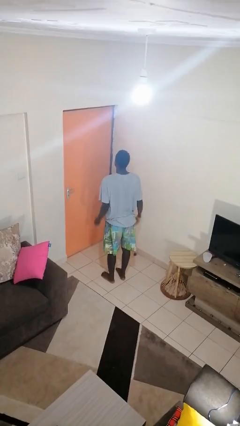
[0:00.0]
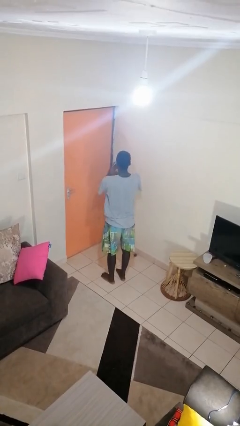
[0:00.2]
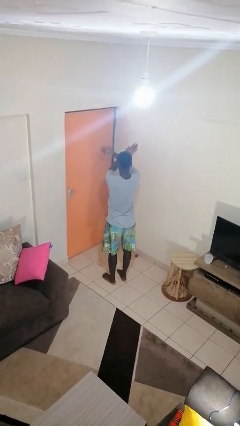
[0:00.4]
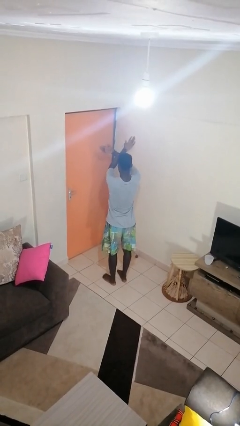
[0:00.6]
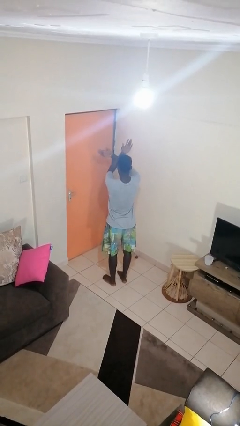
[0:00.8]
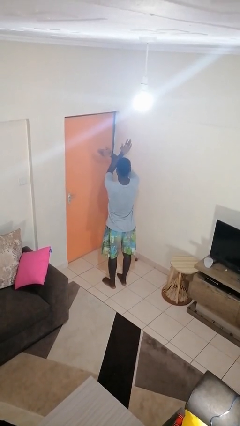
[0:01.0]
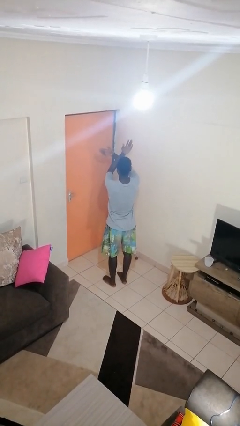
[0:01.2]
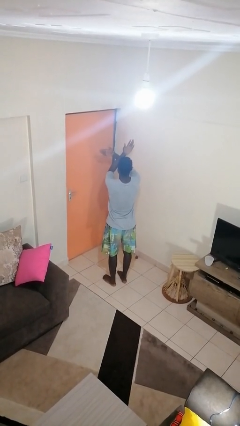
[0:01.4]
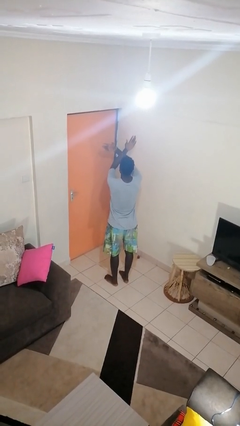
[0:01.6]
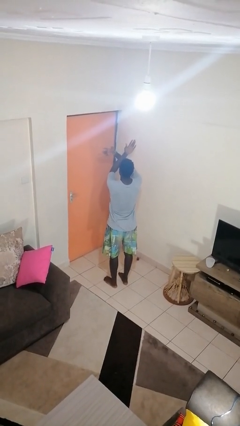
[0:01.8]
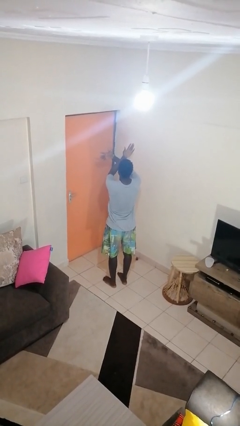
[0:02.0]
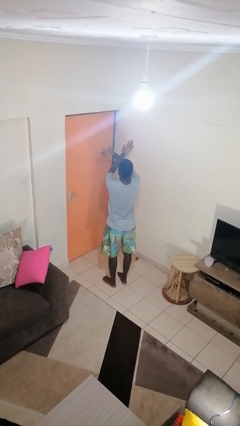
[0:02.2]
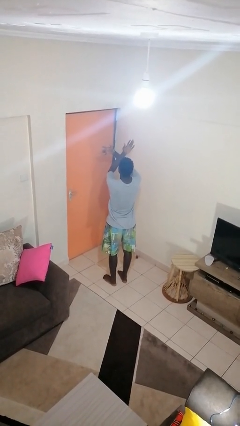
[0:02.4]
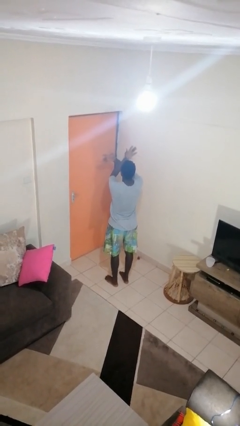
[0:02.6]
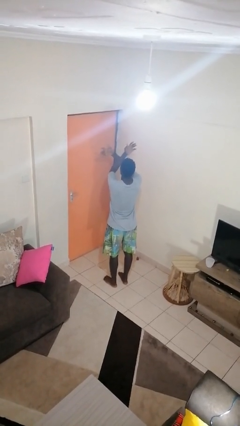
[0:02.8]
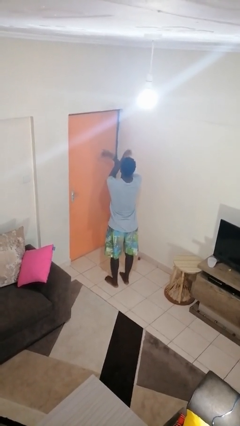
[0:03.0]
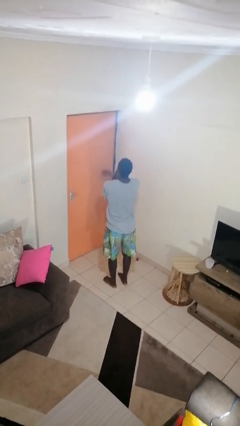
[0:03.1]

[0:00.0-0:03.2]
person gestures arms x

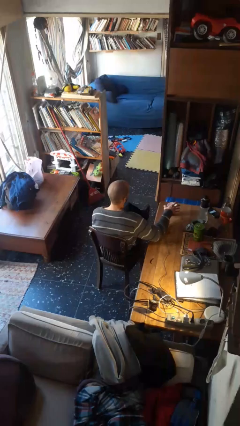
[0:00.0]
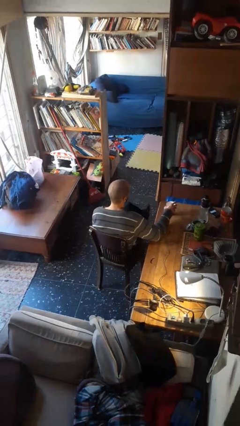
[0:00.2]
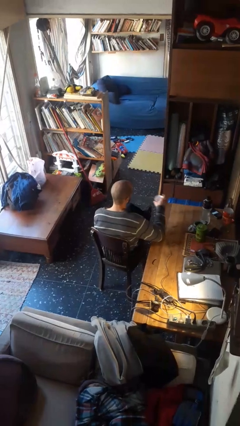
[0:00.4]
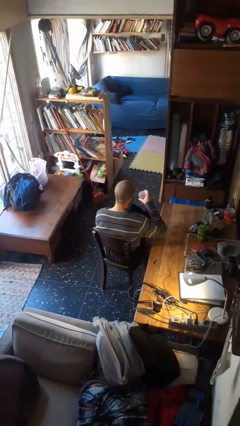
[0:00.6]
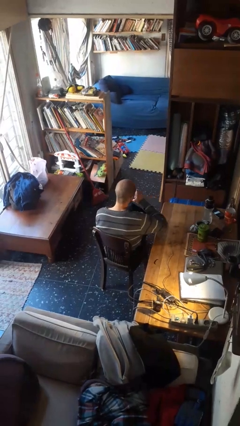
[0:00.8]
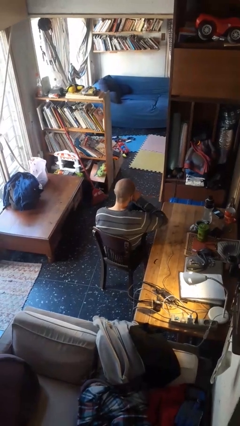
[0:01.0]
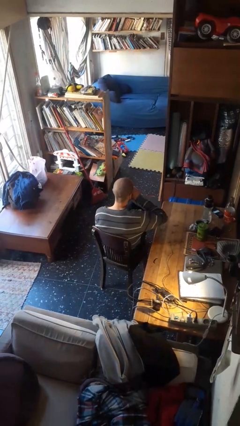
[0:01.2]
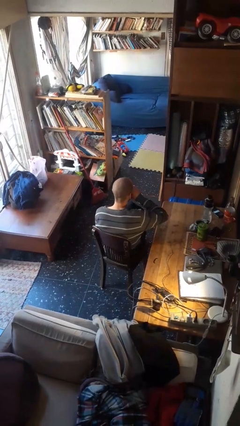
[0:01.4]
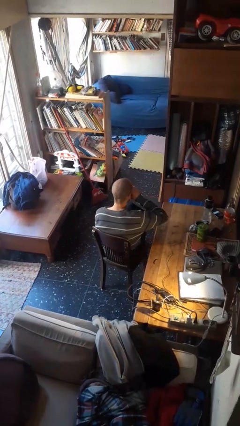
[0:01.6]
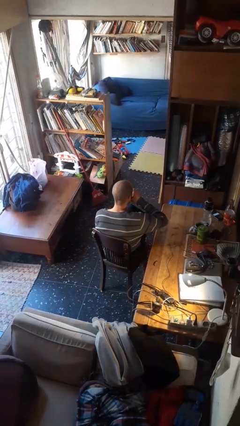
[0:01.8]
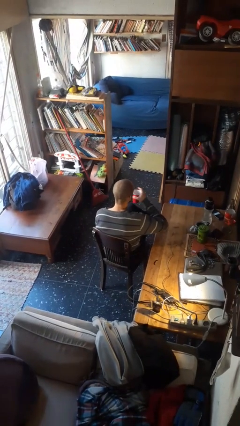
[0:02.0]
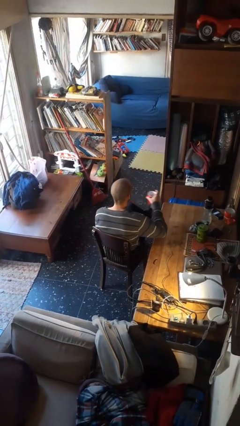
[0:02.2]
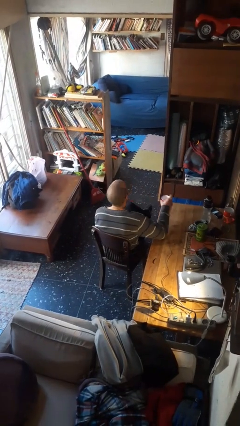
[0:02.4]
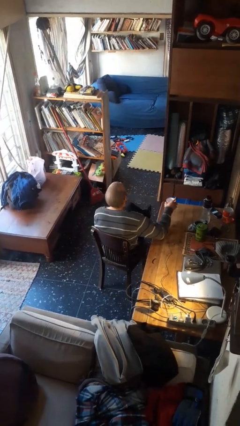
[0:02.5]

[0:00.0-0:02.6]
person drinks from cup

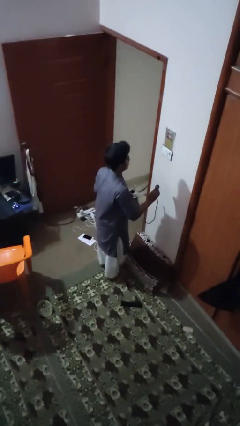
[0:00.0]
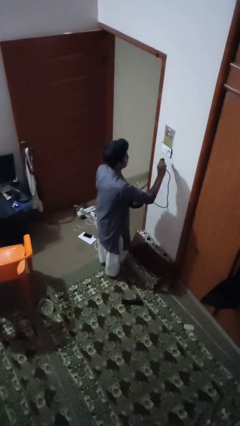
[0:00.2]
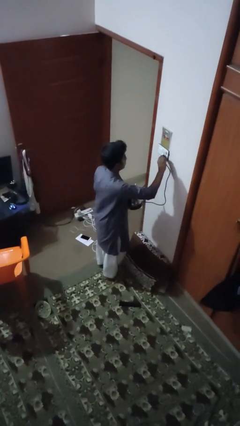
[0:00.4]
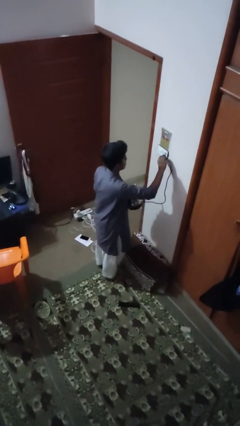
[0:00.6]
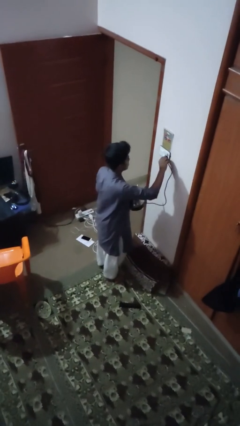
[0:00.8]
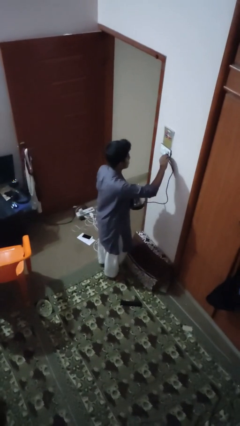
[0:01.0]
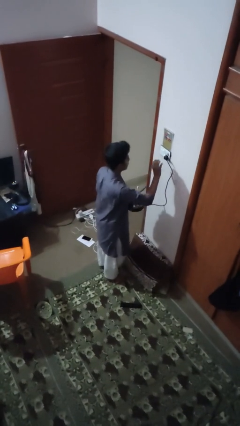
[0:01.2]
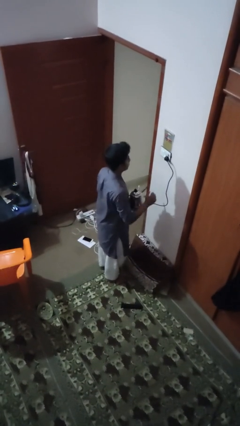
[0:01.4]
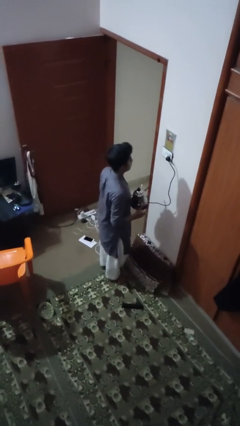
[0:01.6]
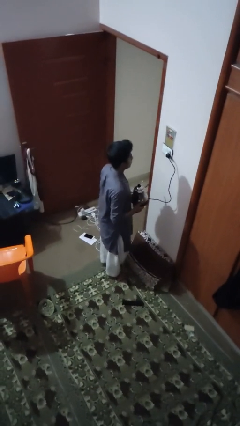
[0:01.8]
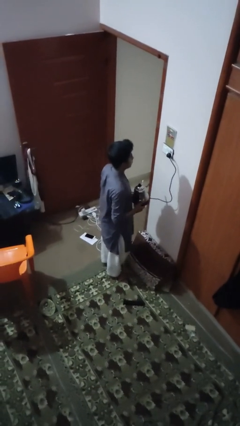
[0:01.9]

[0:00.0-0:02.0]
person plugs into electrical socket

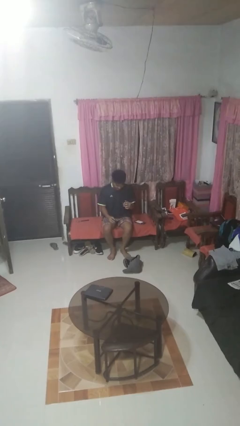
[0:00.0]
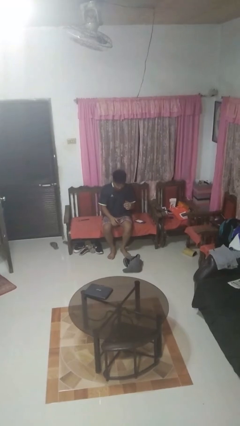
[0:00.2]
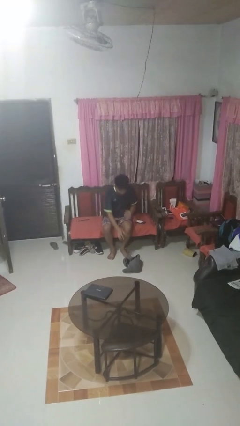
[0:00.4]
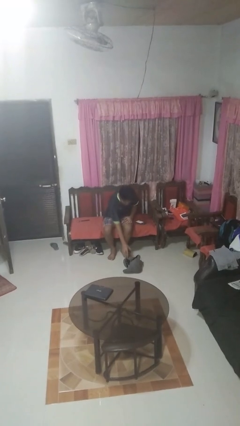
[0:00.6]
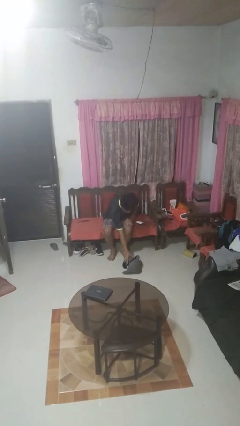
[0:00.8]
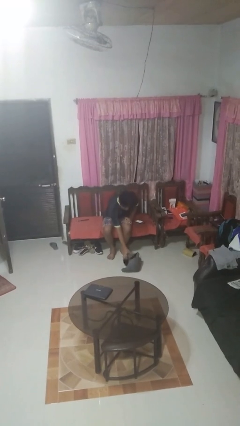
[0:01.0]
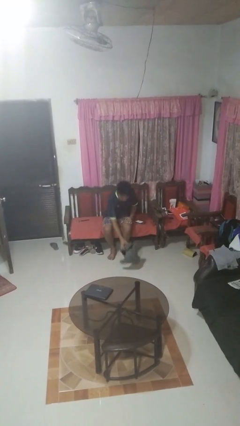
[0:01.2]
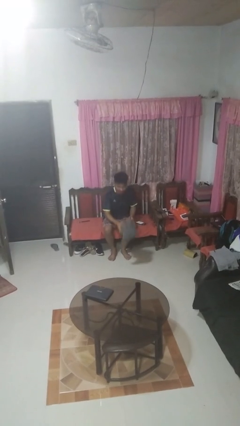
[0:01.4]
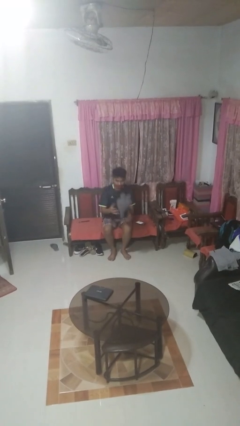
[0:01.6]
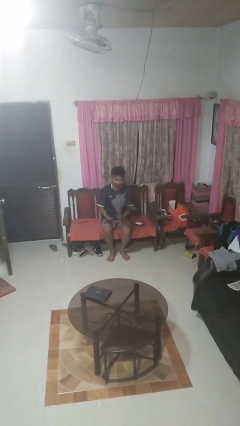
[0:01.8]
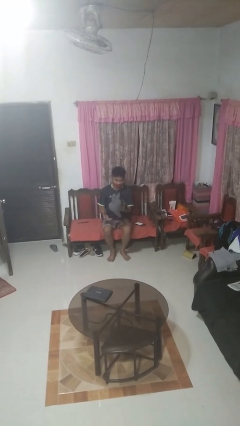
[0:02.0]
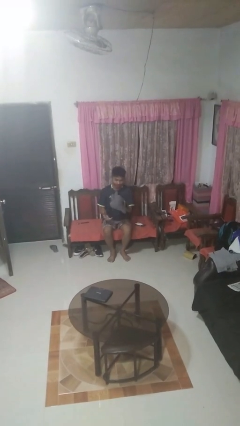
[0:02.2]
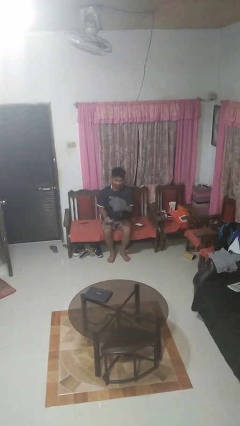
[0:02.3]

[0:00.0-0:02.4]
person picks up object from floor

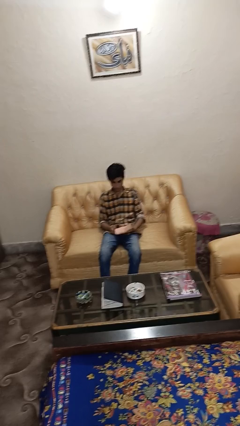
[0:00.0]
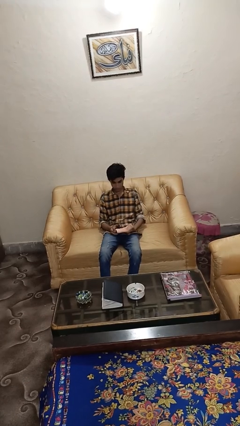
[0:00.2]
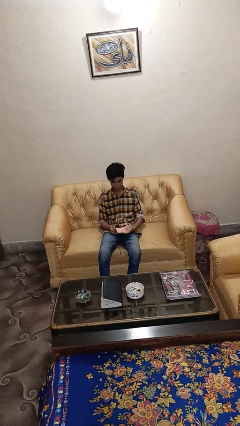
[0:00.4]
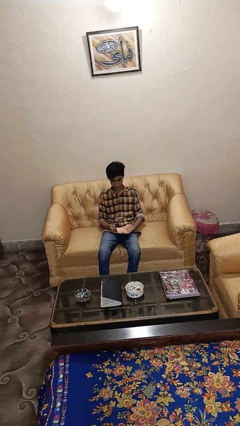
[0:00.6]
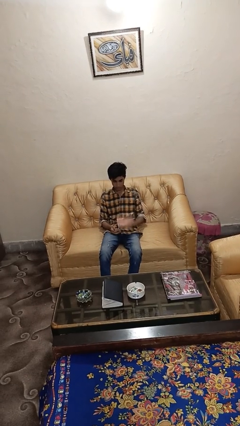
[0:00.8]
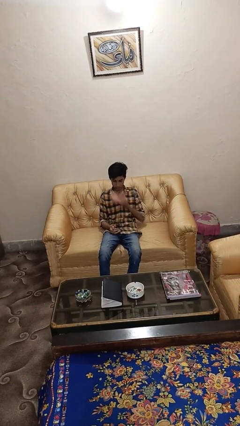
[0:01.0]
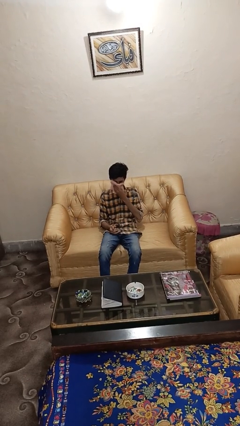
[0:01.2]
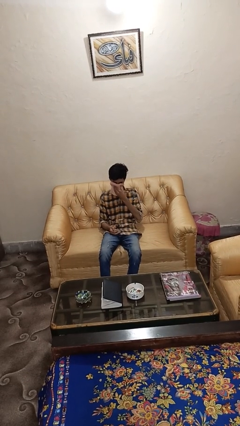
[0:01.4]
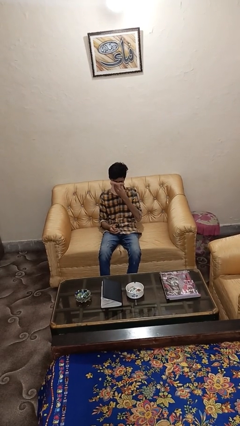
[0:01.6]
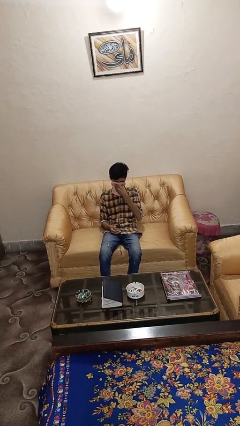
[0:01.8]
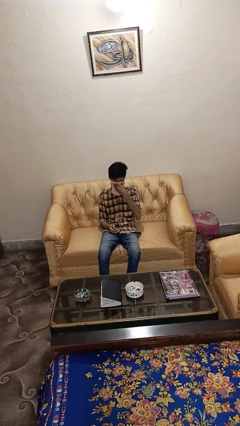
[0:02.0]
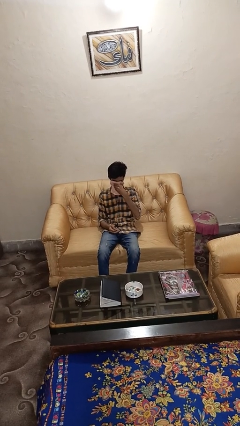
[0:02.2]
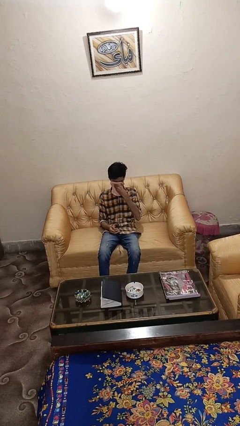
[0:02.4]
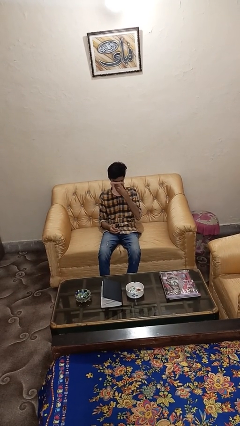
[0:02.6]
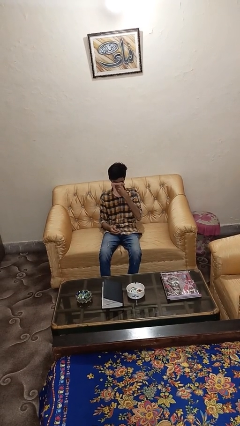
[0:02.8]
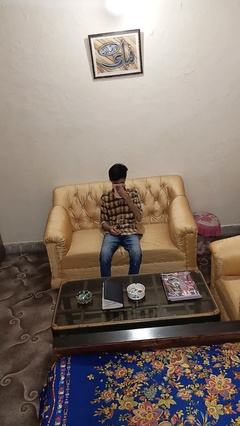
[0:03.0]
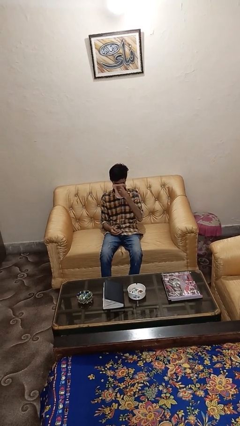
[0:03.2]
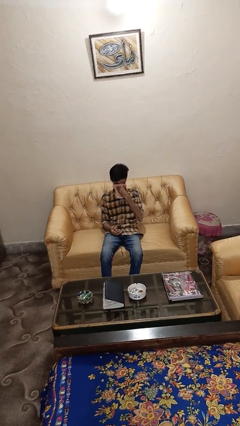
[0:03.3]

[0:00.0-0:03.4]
person blows nose

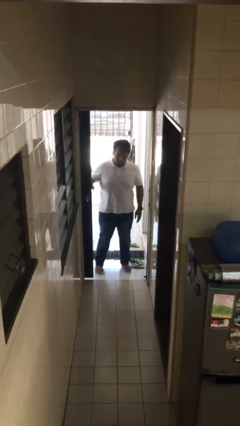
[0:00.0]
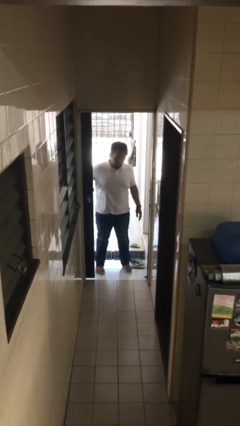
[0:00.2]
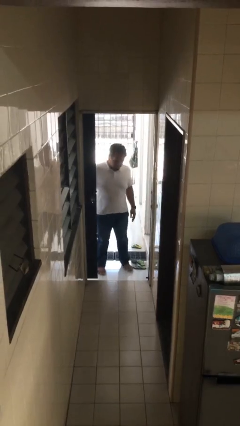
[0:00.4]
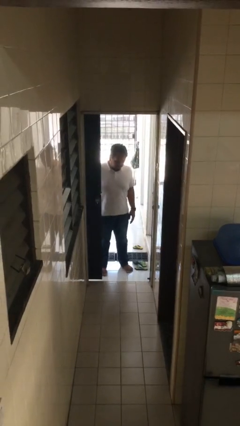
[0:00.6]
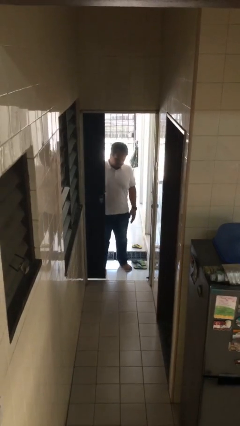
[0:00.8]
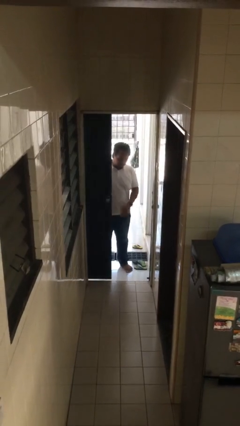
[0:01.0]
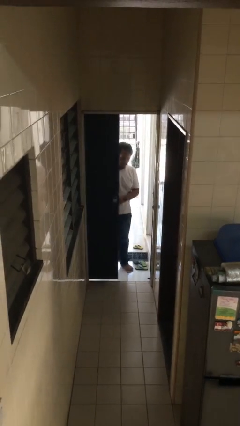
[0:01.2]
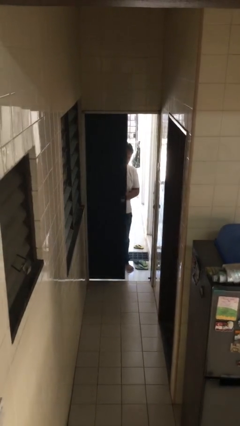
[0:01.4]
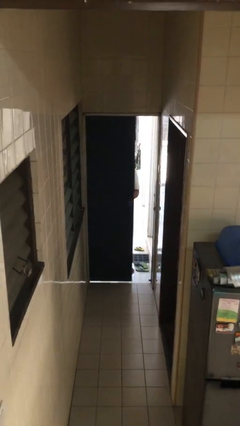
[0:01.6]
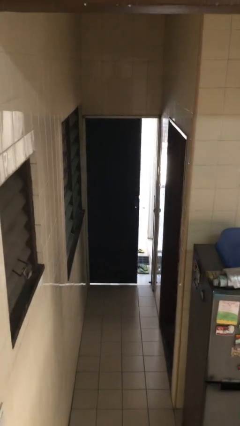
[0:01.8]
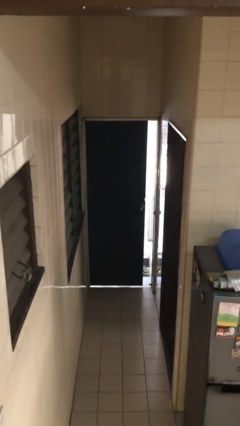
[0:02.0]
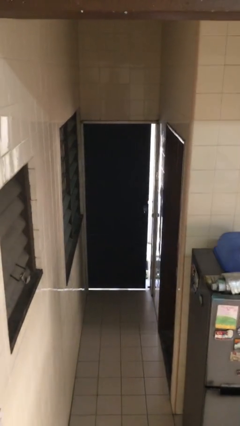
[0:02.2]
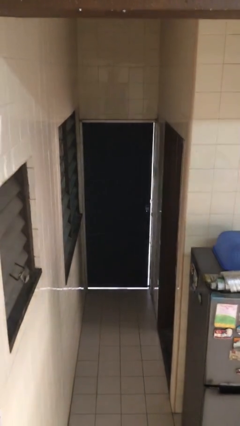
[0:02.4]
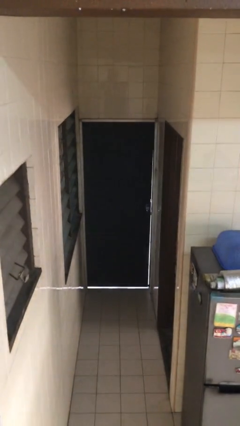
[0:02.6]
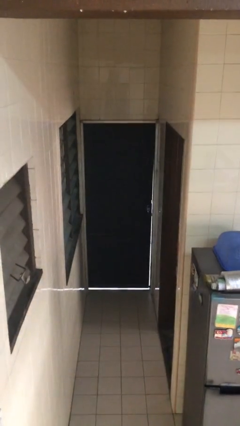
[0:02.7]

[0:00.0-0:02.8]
person closes facility door

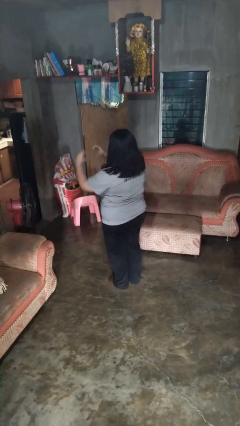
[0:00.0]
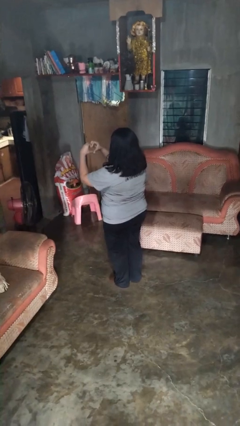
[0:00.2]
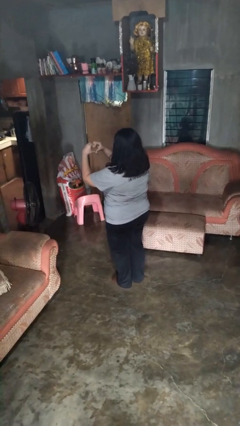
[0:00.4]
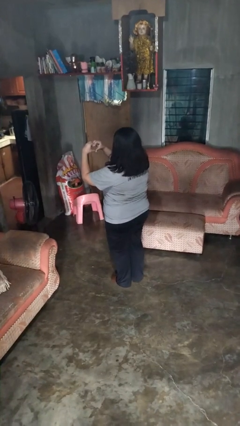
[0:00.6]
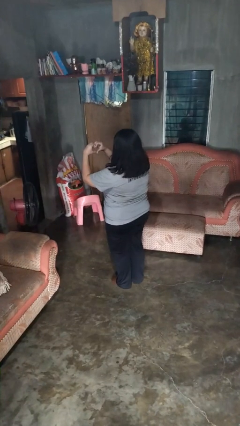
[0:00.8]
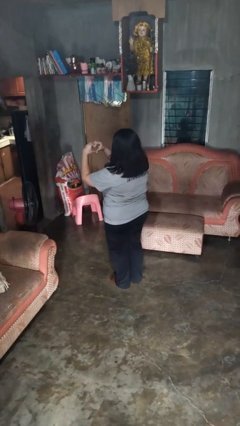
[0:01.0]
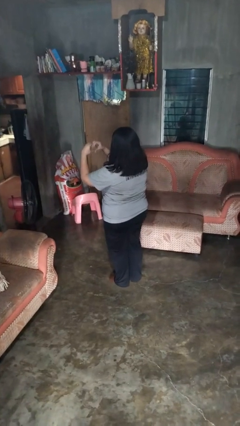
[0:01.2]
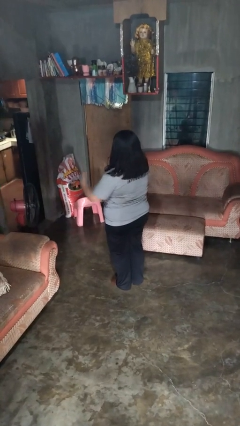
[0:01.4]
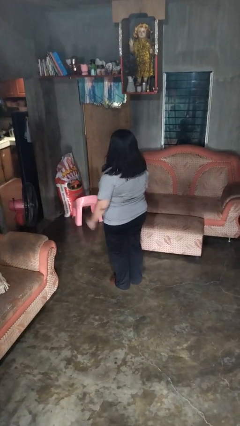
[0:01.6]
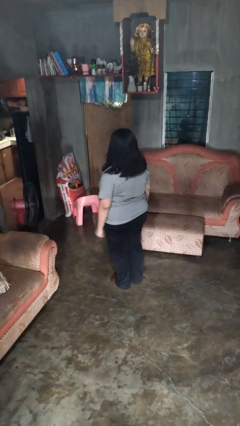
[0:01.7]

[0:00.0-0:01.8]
person gestures heart
